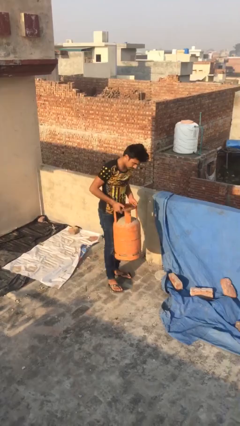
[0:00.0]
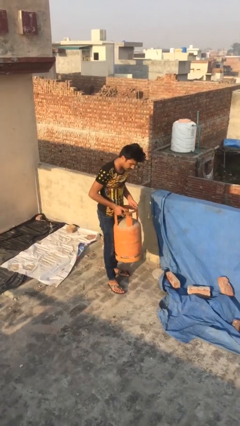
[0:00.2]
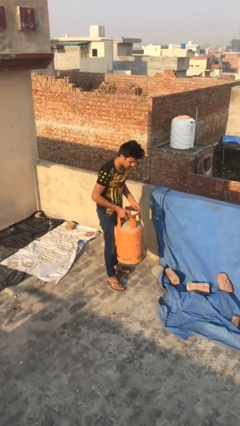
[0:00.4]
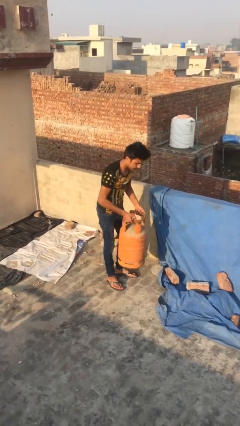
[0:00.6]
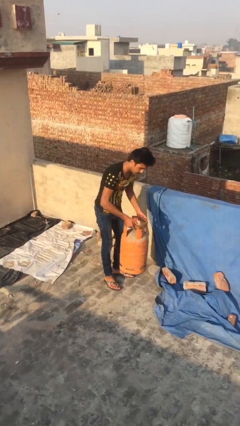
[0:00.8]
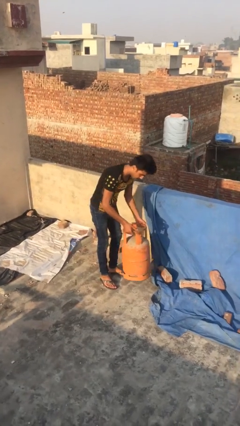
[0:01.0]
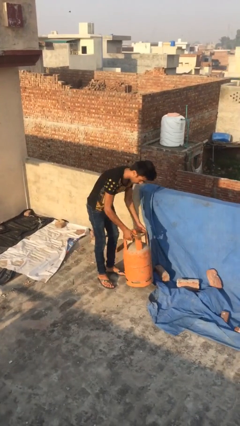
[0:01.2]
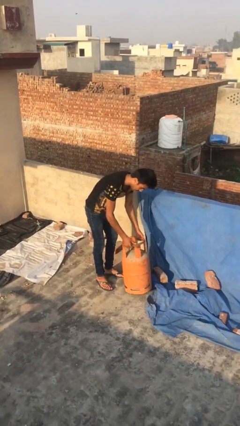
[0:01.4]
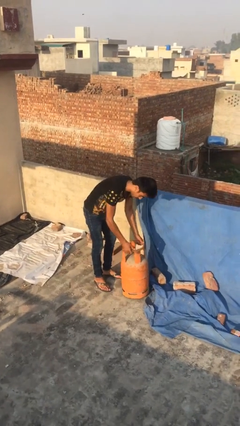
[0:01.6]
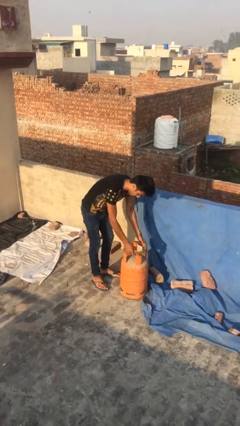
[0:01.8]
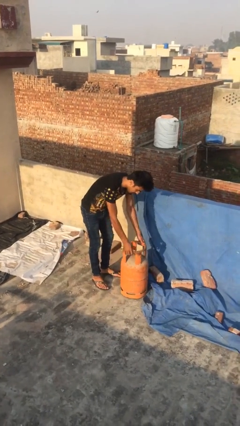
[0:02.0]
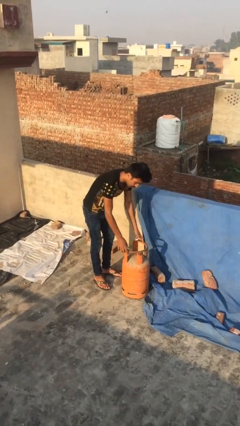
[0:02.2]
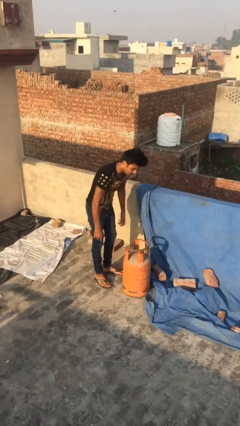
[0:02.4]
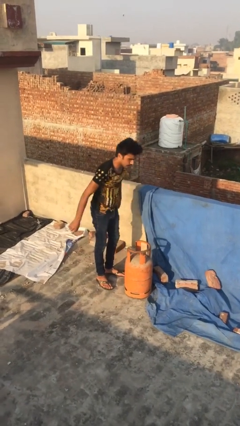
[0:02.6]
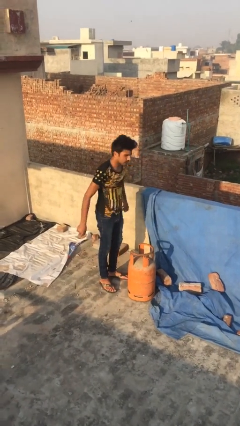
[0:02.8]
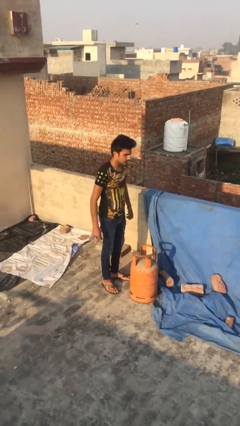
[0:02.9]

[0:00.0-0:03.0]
person puts down object on floor

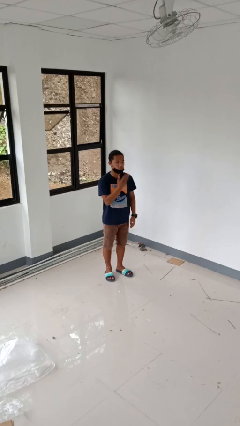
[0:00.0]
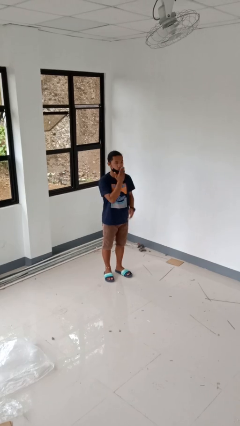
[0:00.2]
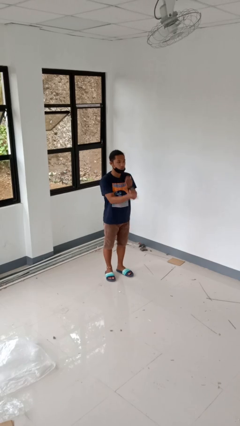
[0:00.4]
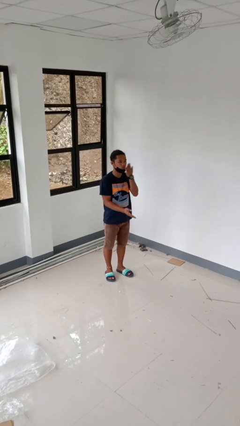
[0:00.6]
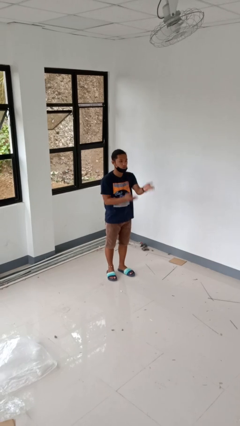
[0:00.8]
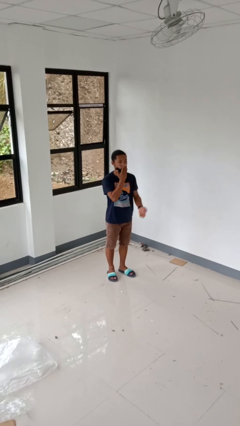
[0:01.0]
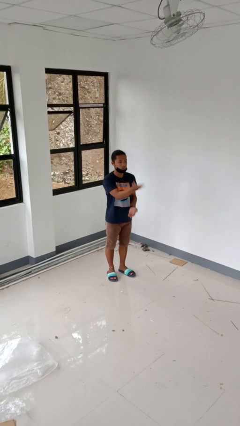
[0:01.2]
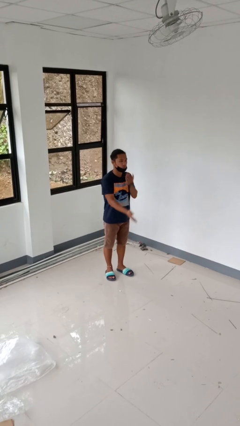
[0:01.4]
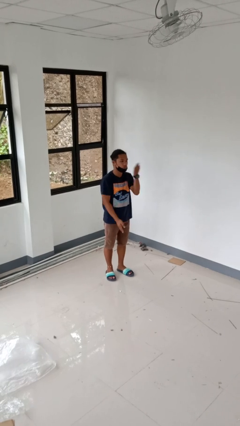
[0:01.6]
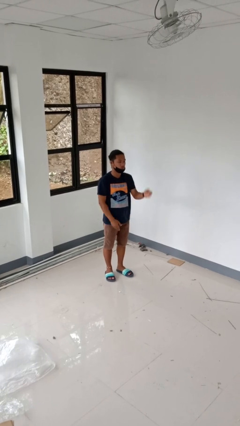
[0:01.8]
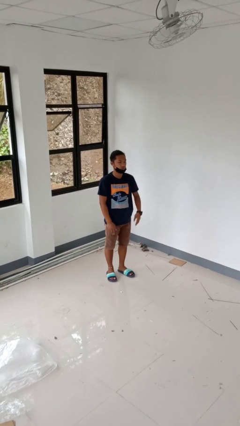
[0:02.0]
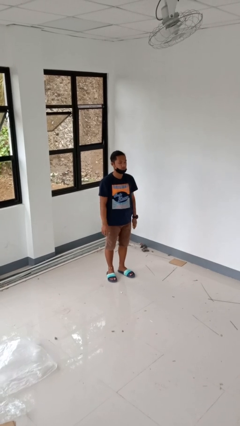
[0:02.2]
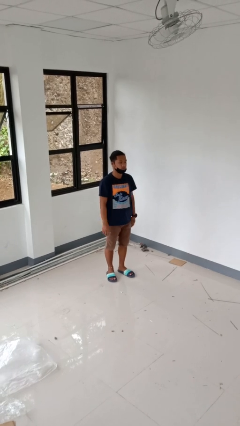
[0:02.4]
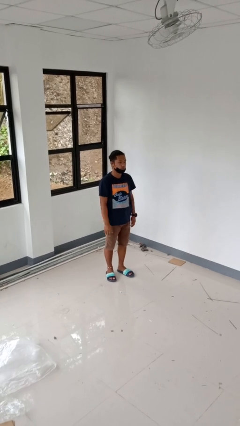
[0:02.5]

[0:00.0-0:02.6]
person gestures blow kiss

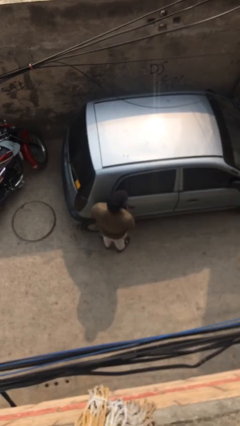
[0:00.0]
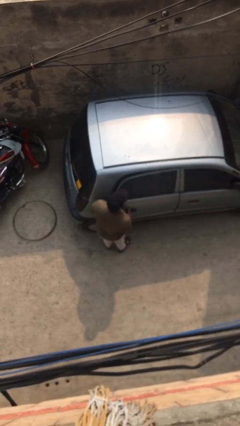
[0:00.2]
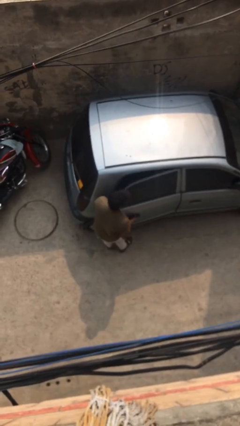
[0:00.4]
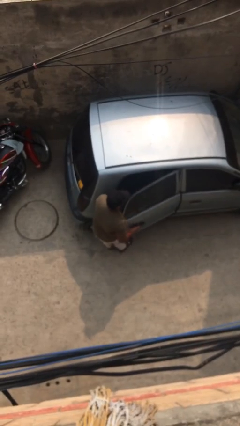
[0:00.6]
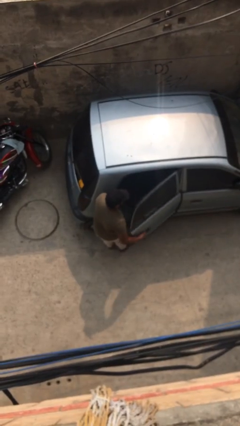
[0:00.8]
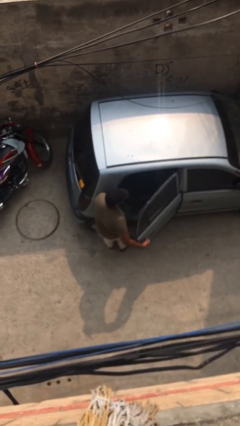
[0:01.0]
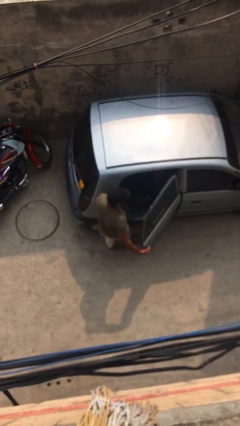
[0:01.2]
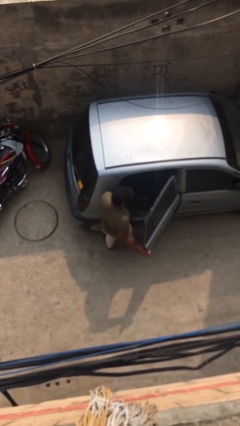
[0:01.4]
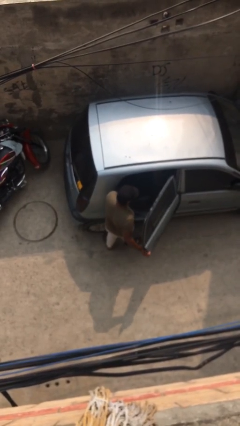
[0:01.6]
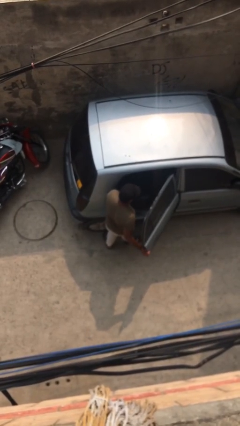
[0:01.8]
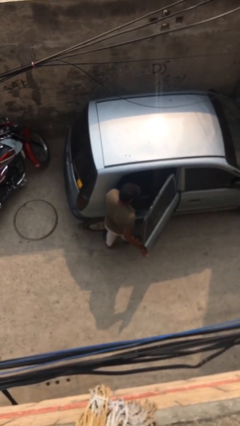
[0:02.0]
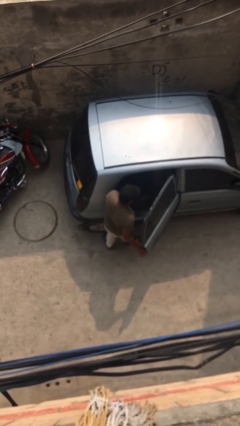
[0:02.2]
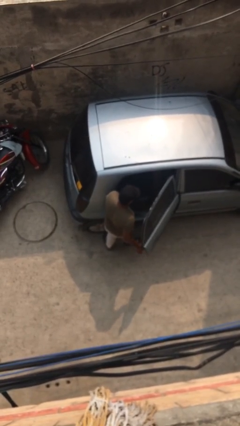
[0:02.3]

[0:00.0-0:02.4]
person opens car door

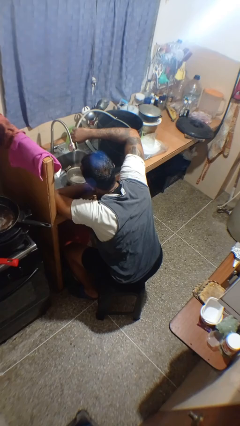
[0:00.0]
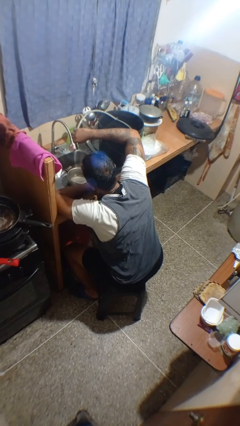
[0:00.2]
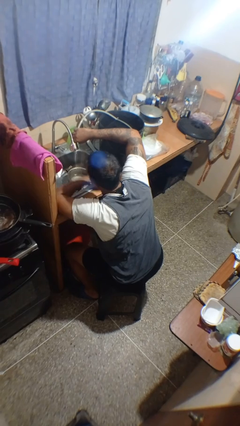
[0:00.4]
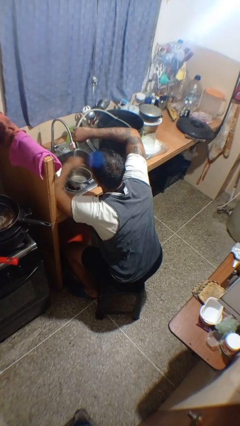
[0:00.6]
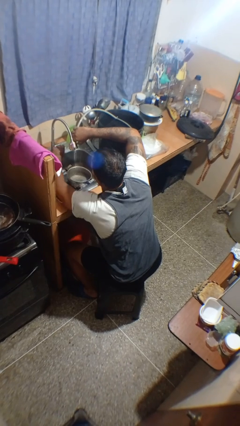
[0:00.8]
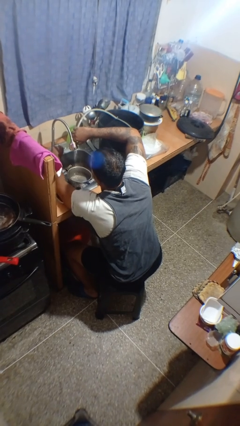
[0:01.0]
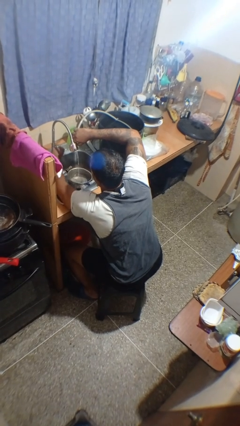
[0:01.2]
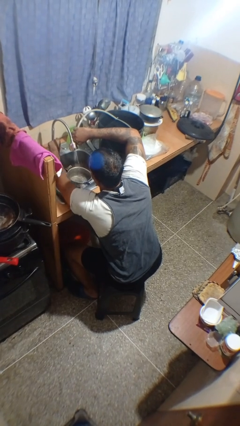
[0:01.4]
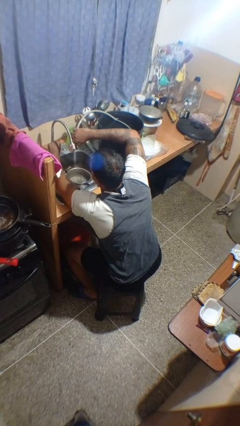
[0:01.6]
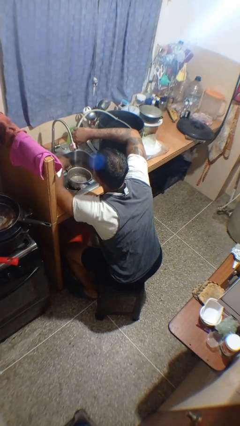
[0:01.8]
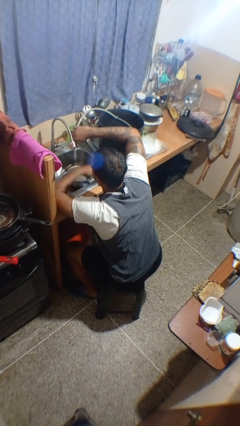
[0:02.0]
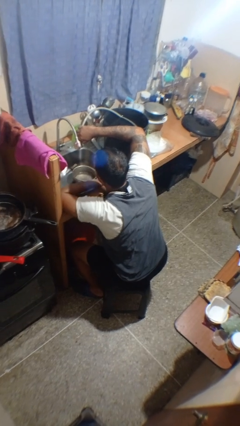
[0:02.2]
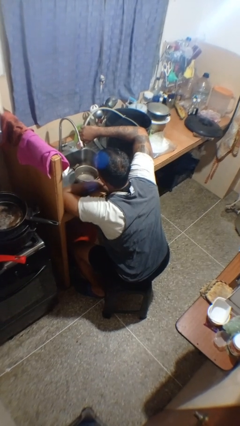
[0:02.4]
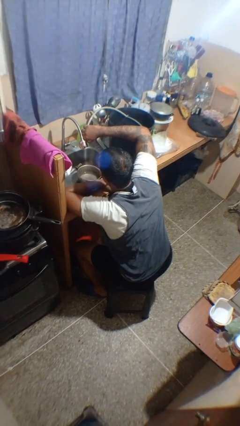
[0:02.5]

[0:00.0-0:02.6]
person turns off faucet

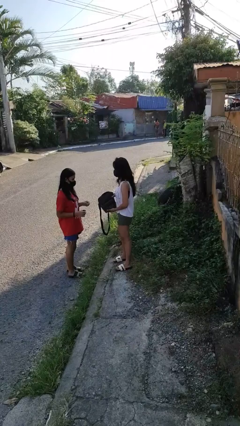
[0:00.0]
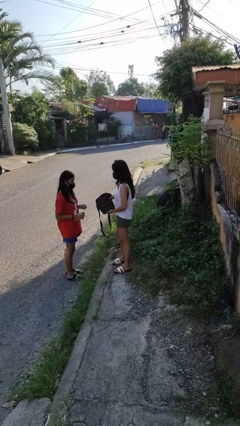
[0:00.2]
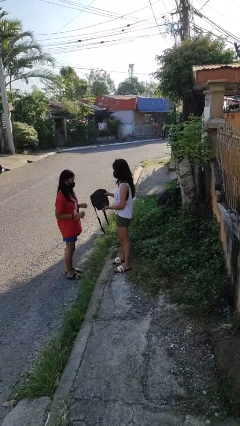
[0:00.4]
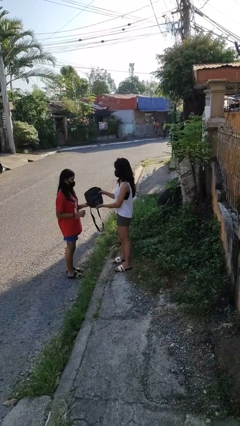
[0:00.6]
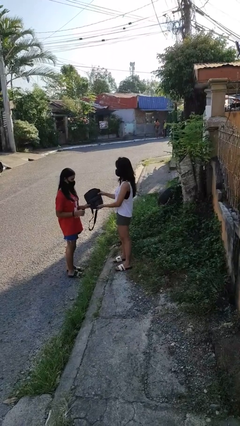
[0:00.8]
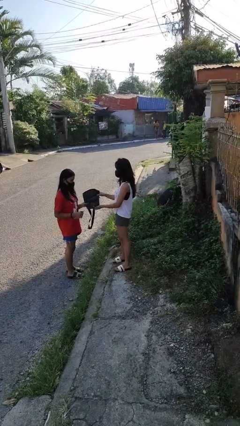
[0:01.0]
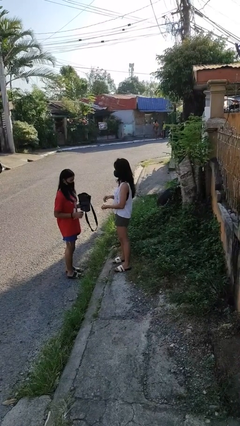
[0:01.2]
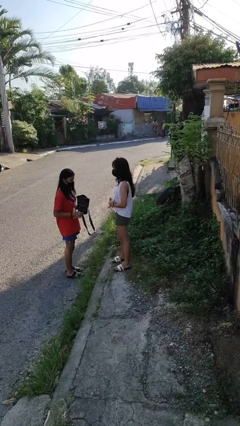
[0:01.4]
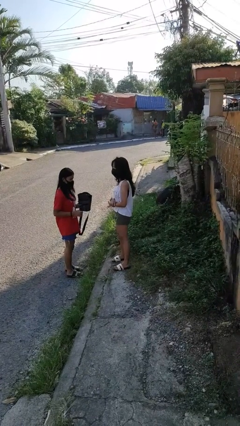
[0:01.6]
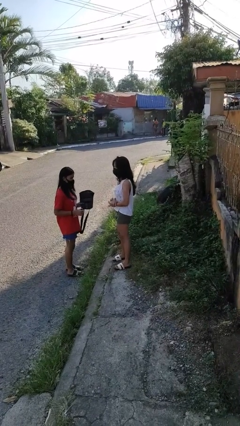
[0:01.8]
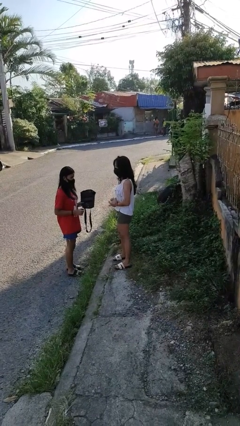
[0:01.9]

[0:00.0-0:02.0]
person transfers object to person

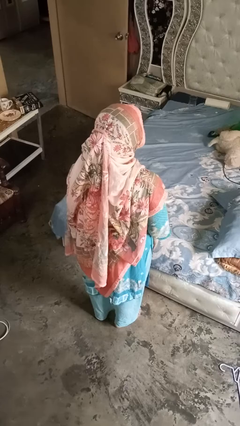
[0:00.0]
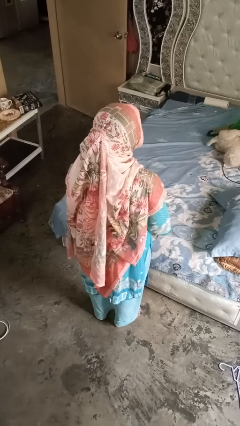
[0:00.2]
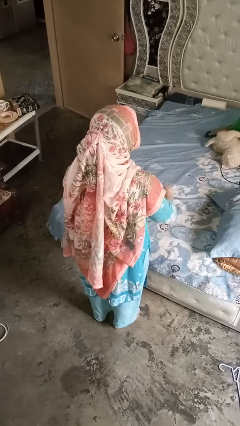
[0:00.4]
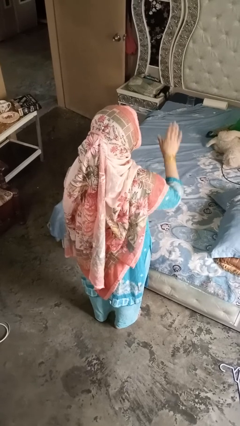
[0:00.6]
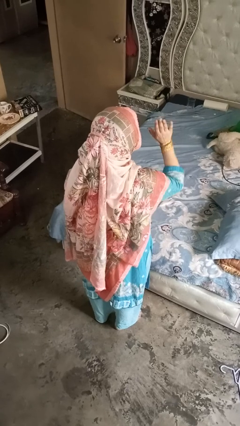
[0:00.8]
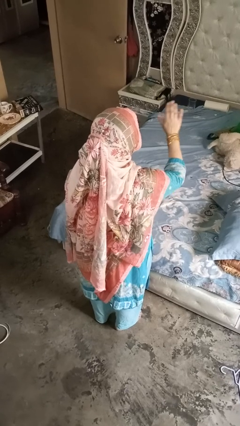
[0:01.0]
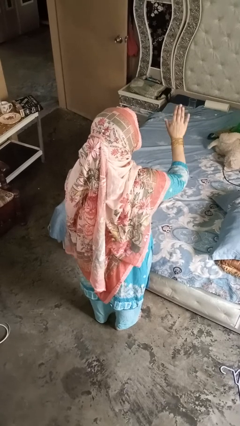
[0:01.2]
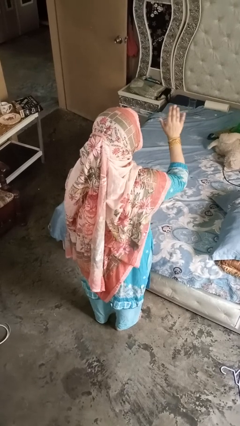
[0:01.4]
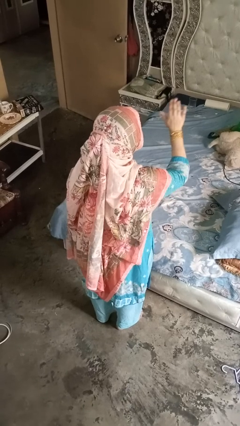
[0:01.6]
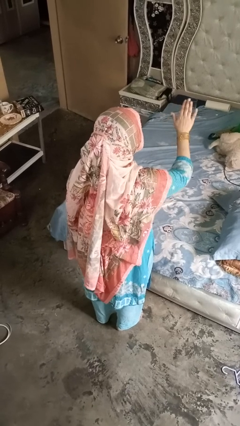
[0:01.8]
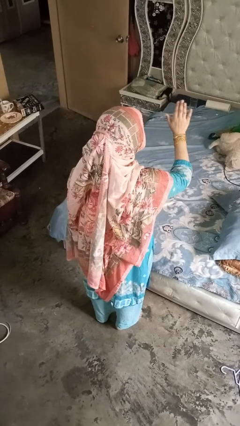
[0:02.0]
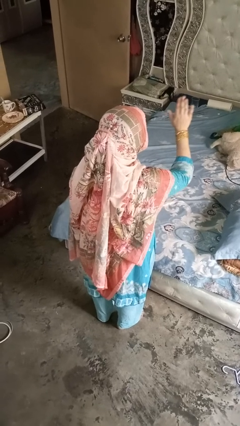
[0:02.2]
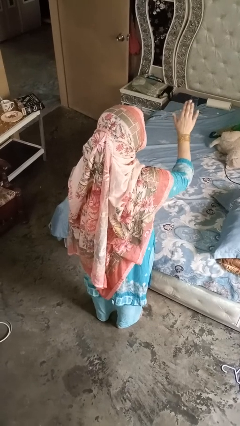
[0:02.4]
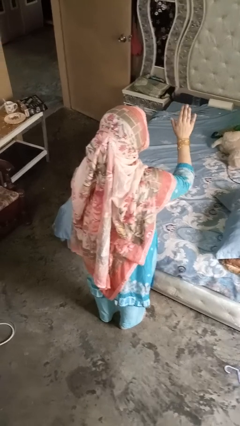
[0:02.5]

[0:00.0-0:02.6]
person gestures stop

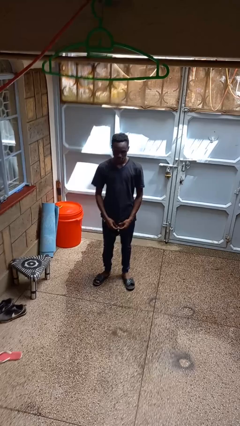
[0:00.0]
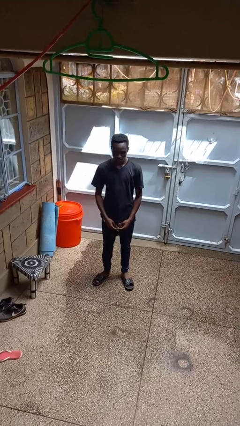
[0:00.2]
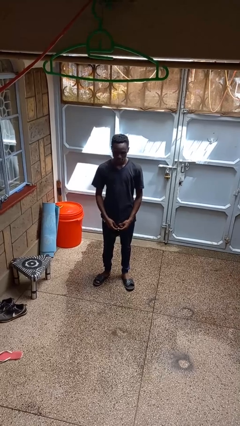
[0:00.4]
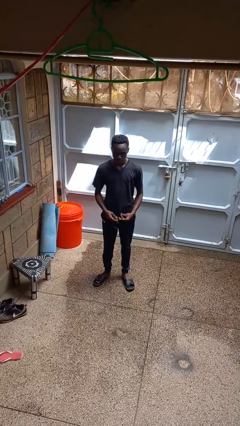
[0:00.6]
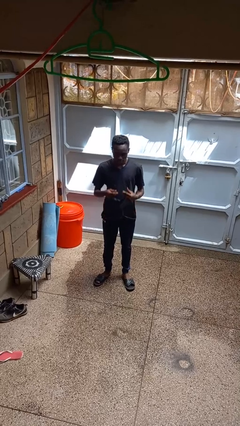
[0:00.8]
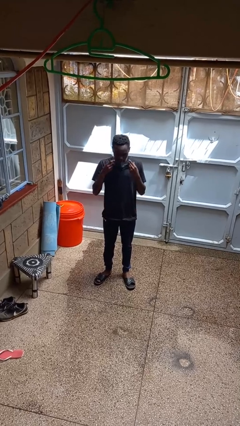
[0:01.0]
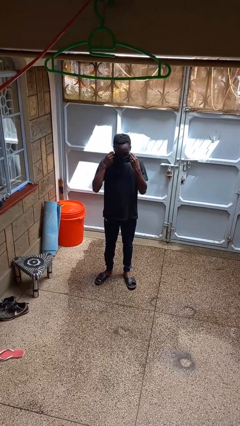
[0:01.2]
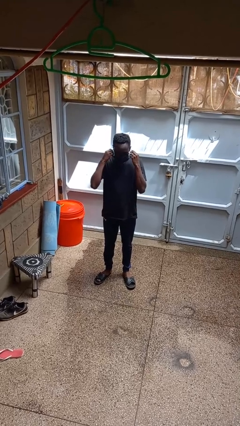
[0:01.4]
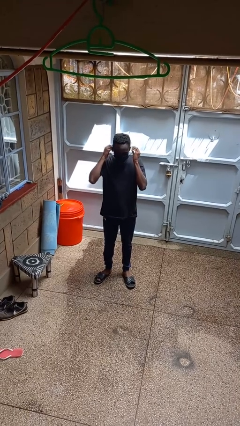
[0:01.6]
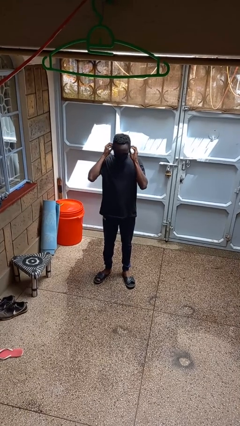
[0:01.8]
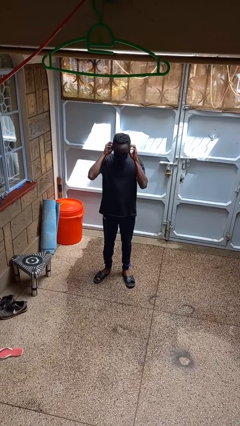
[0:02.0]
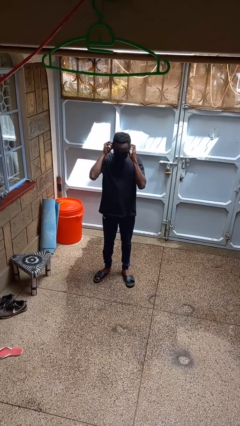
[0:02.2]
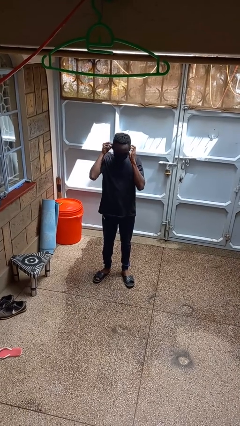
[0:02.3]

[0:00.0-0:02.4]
person puts on facemask
